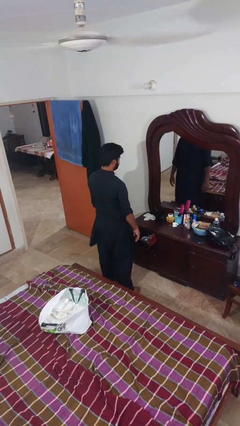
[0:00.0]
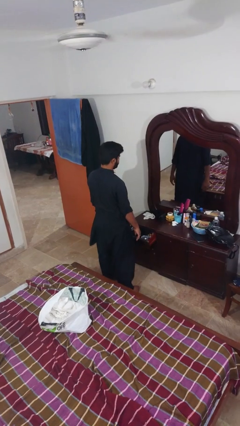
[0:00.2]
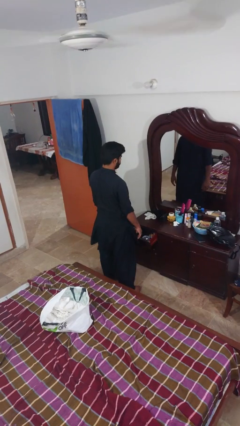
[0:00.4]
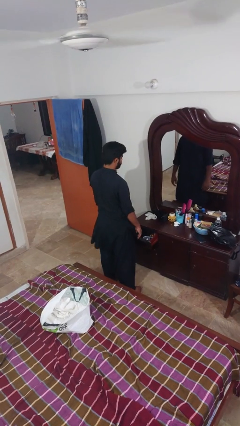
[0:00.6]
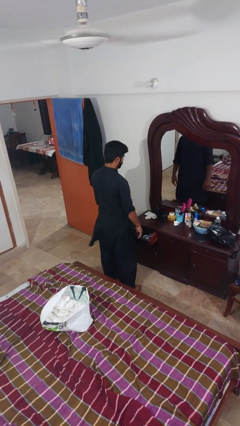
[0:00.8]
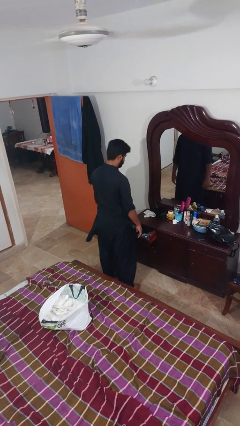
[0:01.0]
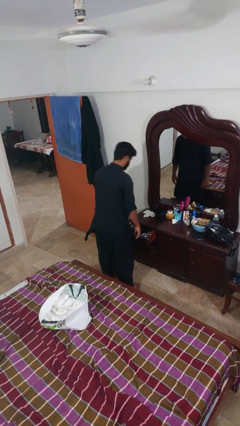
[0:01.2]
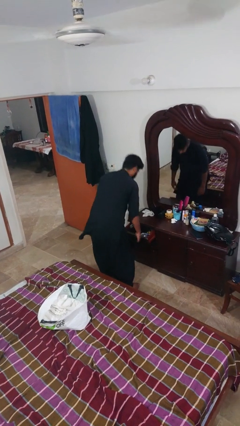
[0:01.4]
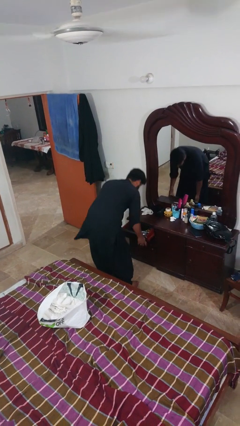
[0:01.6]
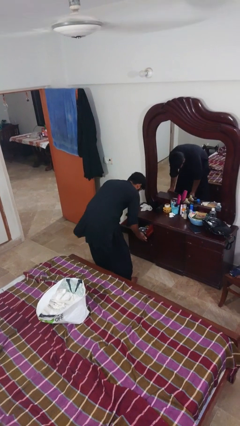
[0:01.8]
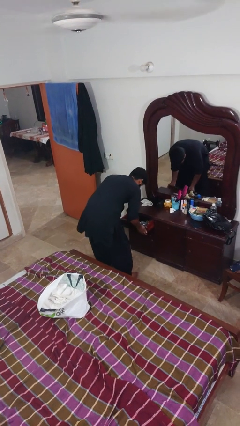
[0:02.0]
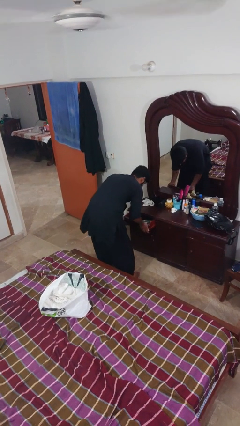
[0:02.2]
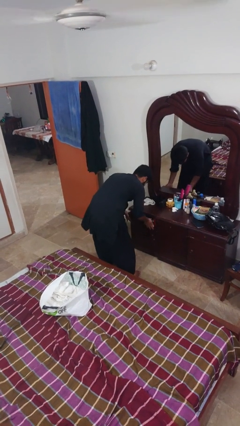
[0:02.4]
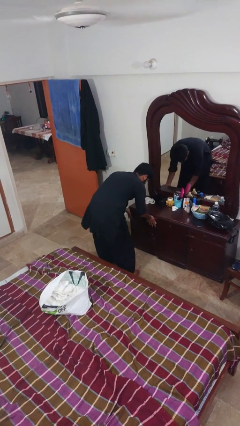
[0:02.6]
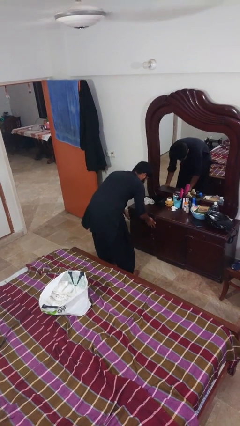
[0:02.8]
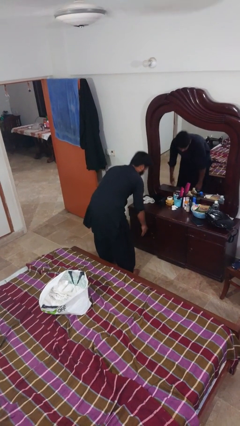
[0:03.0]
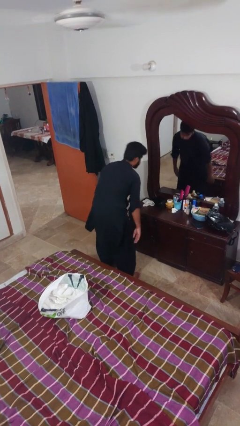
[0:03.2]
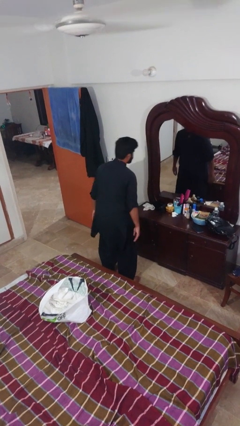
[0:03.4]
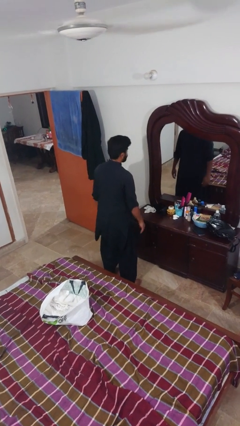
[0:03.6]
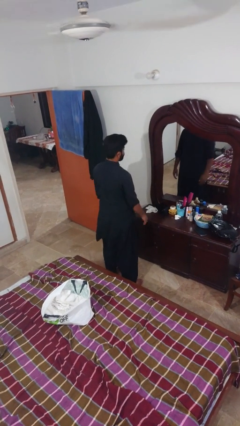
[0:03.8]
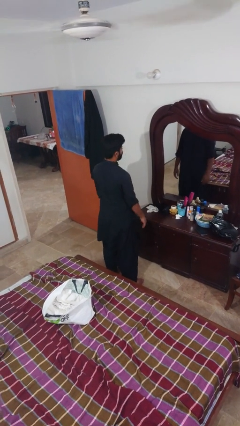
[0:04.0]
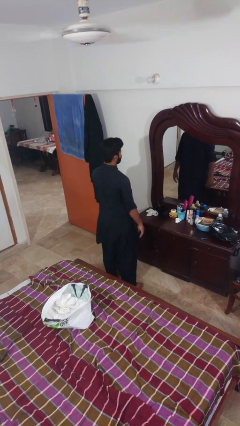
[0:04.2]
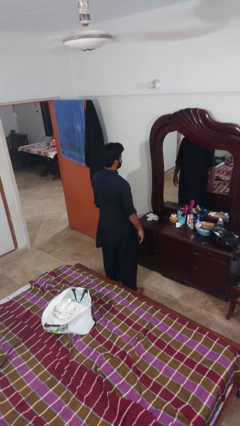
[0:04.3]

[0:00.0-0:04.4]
person closes dresser drawer

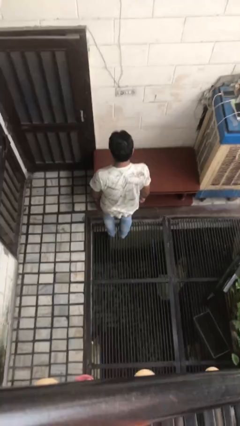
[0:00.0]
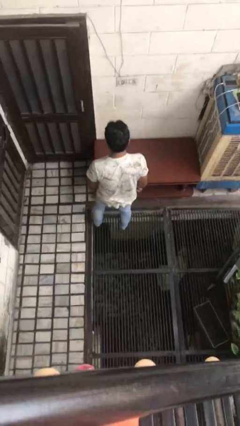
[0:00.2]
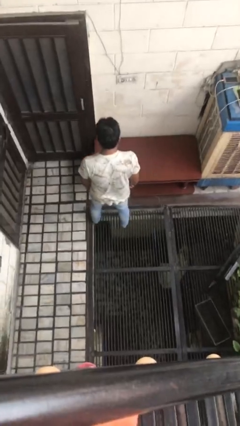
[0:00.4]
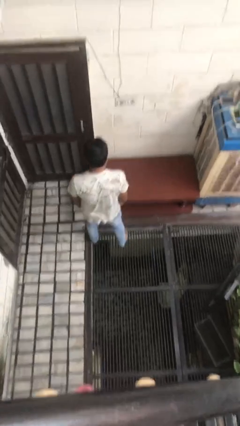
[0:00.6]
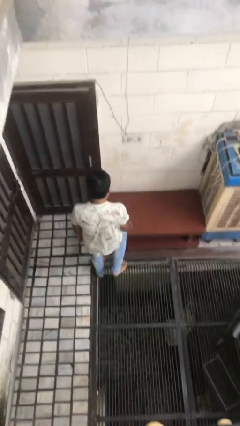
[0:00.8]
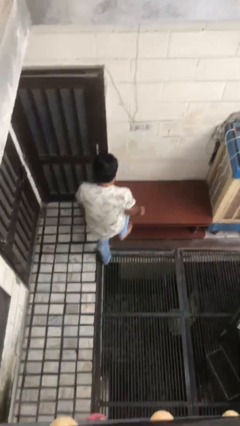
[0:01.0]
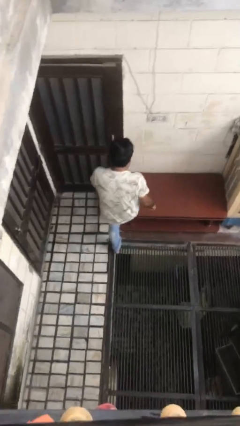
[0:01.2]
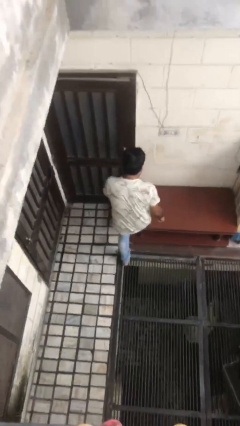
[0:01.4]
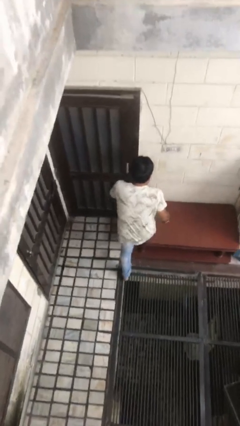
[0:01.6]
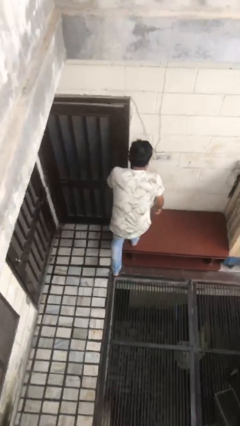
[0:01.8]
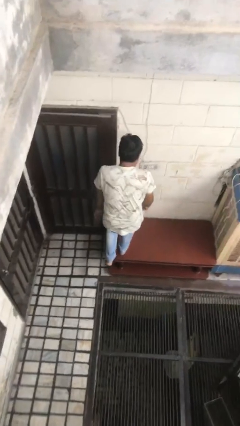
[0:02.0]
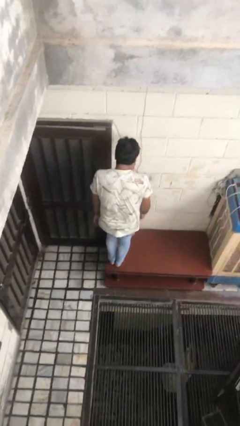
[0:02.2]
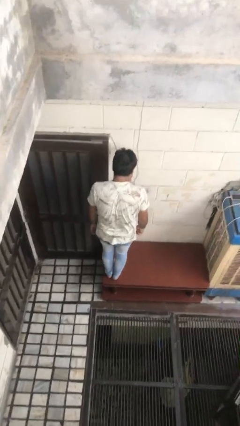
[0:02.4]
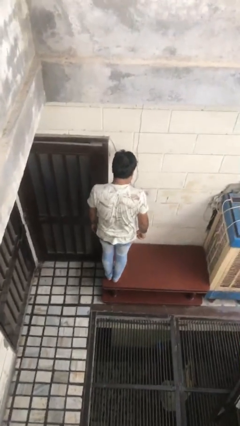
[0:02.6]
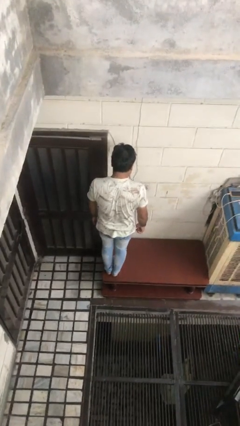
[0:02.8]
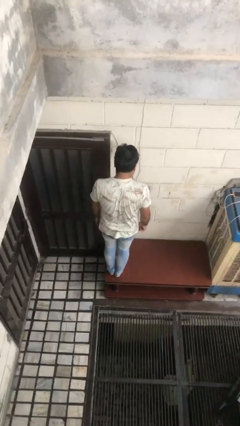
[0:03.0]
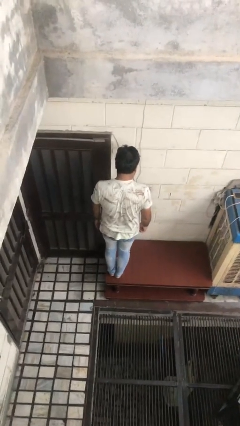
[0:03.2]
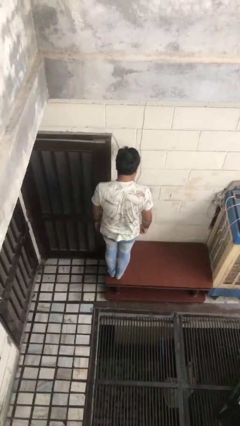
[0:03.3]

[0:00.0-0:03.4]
person climbs on table

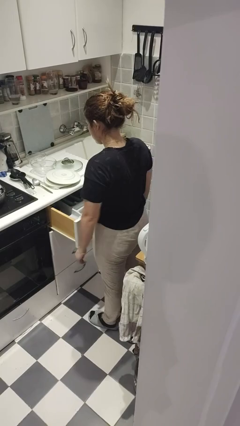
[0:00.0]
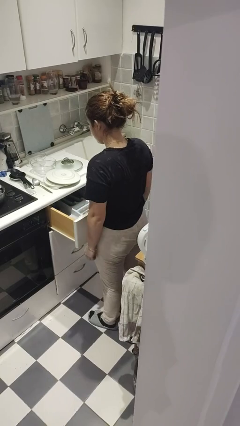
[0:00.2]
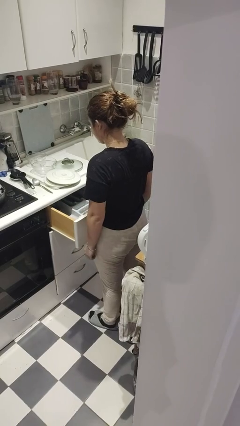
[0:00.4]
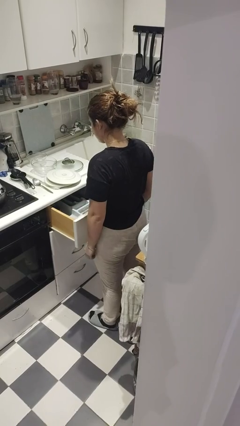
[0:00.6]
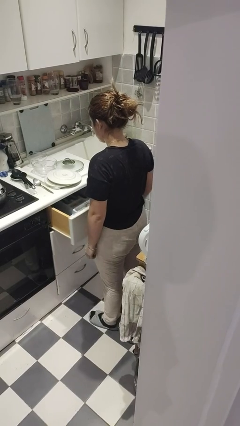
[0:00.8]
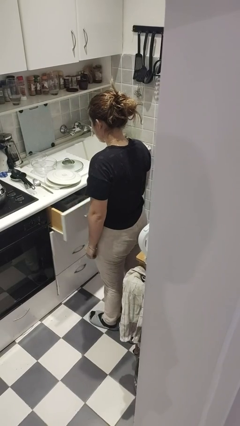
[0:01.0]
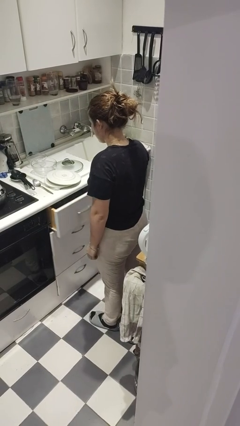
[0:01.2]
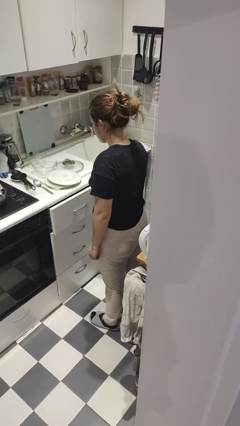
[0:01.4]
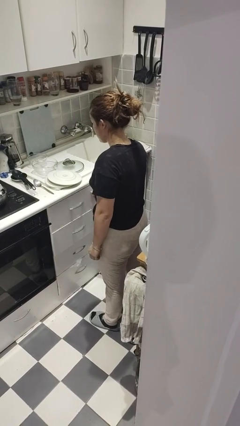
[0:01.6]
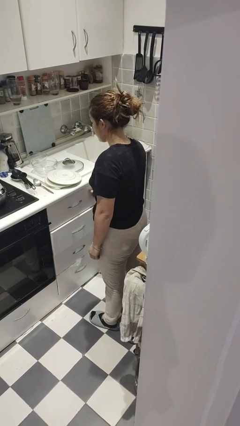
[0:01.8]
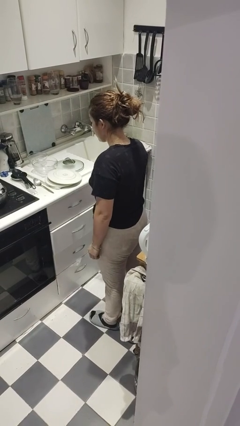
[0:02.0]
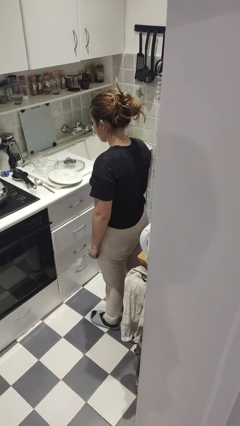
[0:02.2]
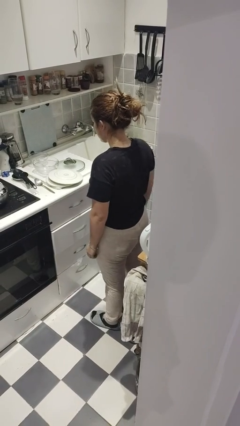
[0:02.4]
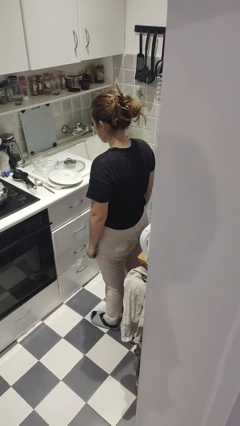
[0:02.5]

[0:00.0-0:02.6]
person closes kitchen drawer

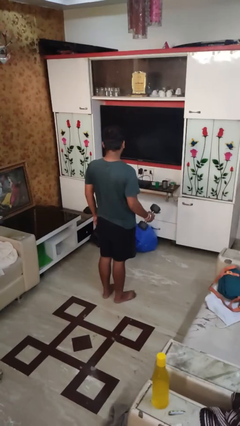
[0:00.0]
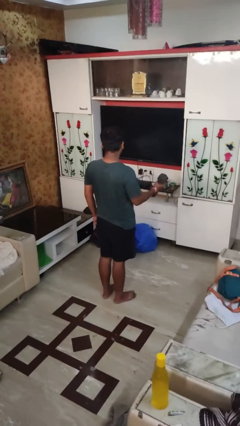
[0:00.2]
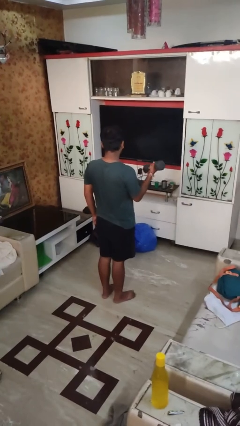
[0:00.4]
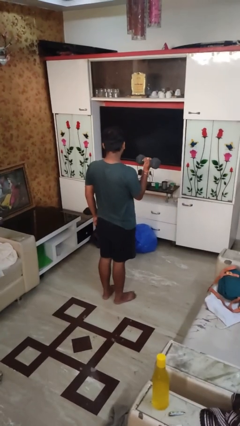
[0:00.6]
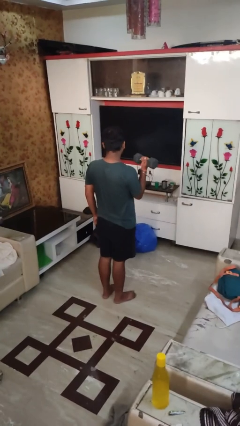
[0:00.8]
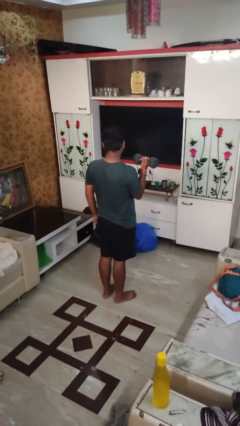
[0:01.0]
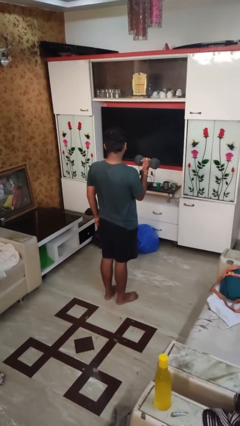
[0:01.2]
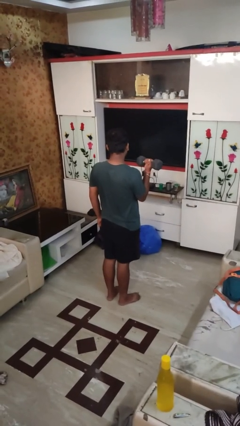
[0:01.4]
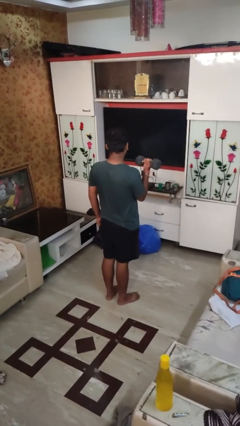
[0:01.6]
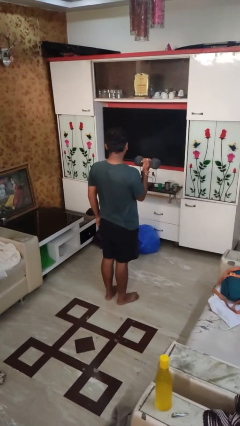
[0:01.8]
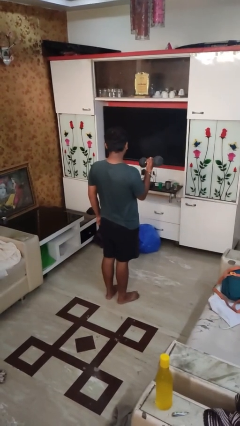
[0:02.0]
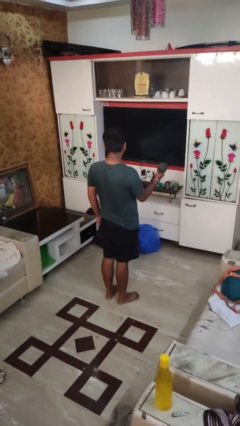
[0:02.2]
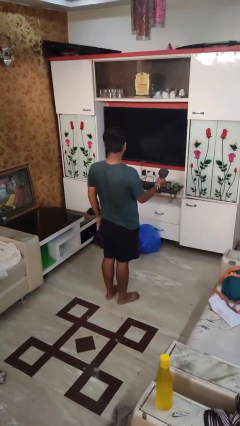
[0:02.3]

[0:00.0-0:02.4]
person lifts dumbbells

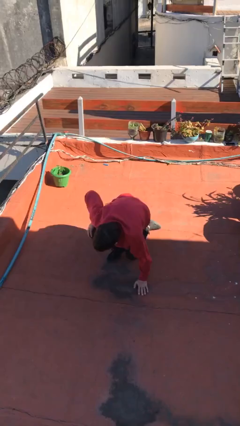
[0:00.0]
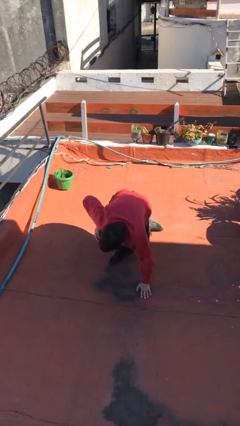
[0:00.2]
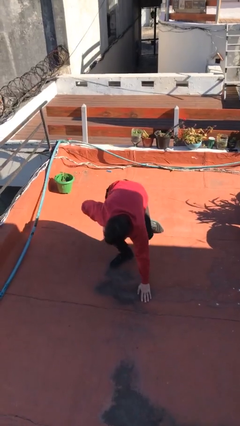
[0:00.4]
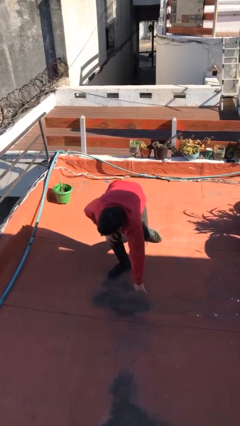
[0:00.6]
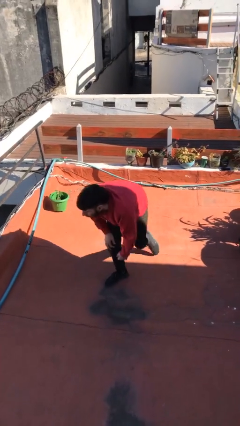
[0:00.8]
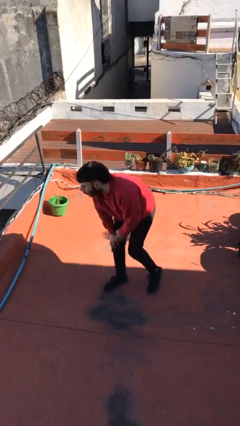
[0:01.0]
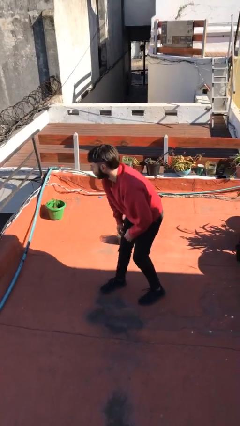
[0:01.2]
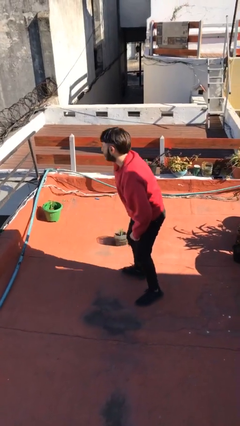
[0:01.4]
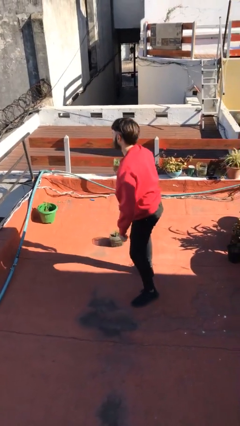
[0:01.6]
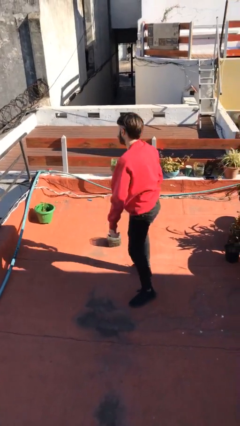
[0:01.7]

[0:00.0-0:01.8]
person stands up from floor

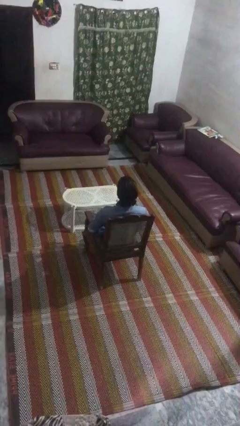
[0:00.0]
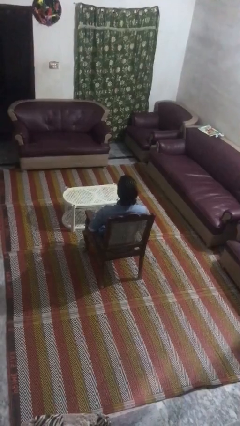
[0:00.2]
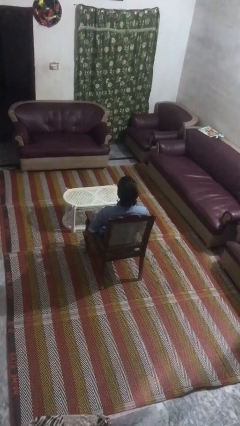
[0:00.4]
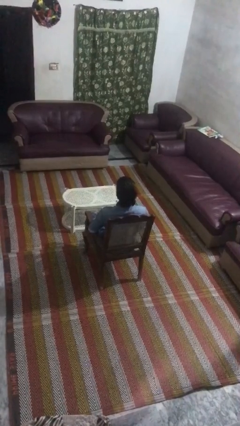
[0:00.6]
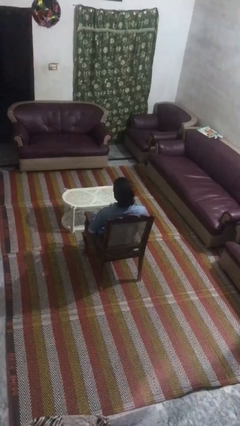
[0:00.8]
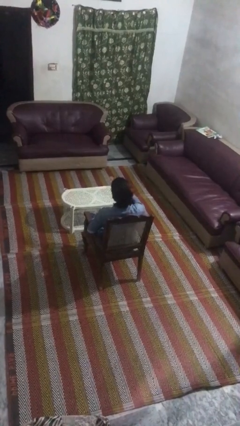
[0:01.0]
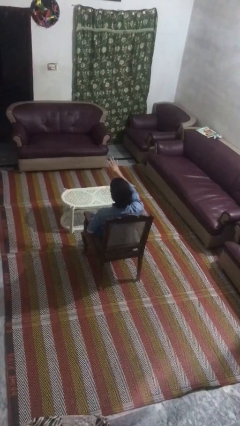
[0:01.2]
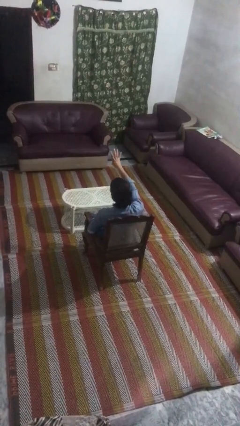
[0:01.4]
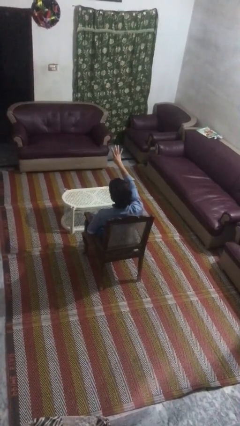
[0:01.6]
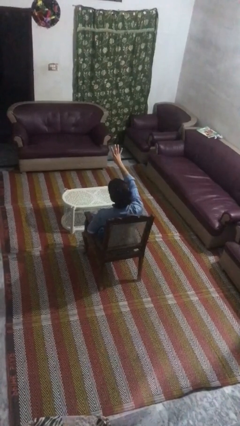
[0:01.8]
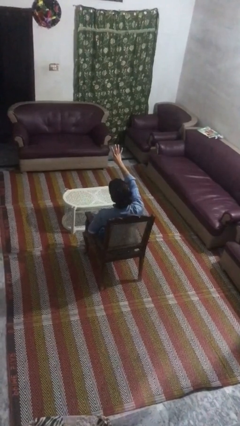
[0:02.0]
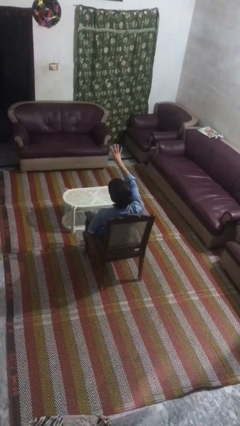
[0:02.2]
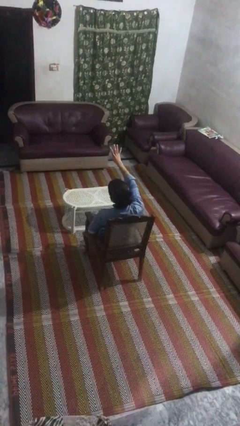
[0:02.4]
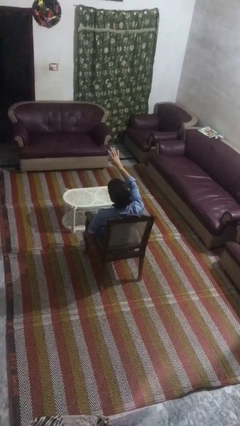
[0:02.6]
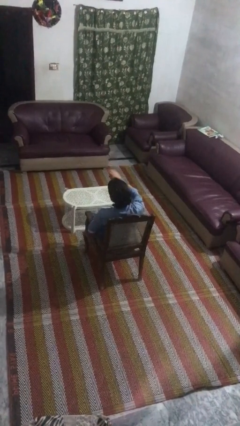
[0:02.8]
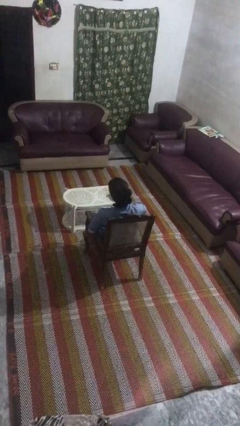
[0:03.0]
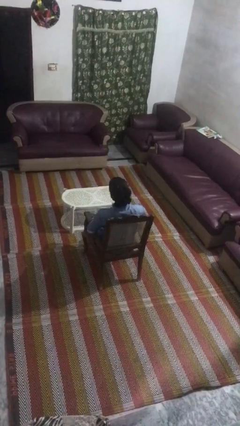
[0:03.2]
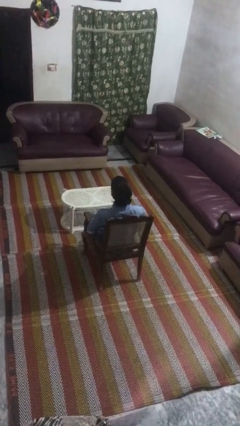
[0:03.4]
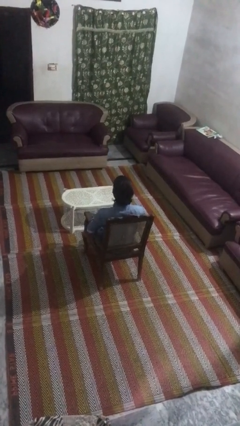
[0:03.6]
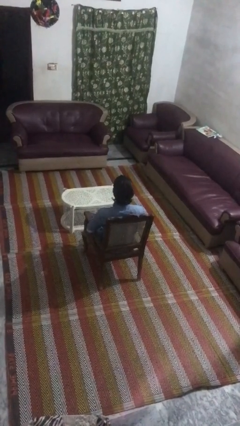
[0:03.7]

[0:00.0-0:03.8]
person gestures number four
